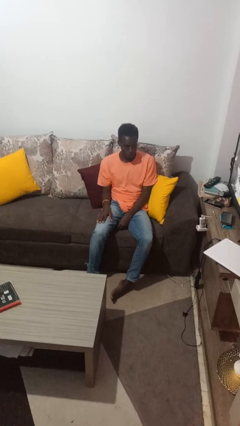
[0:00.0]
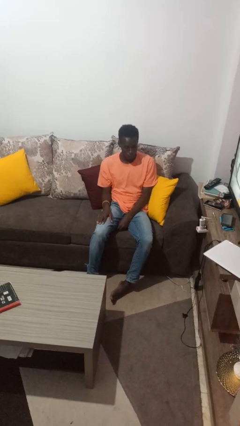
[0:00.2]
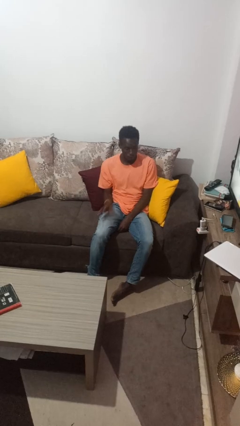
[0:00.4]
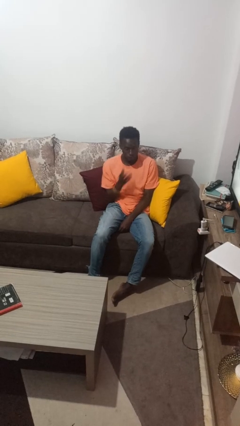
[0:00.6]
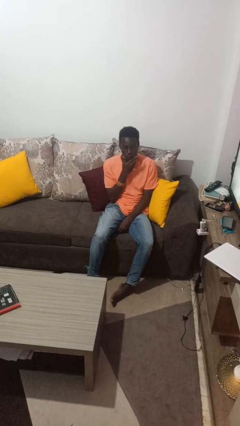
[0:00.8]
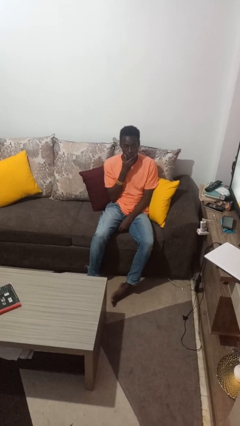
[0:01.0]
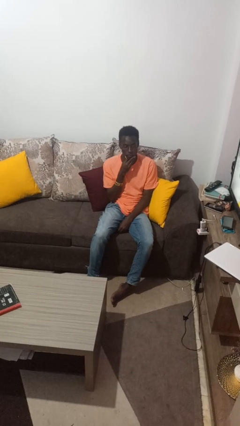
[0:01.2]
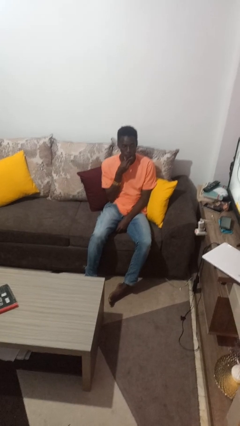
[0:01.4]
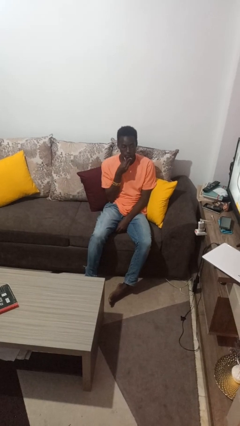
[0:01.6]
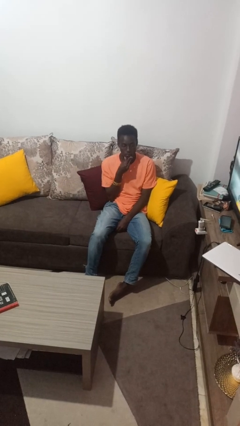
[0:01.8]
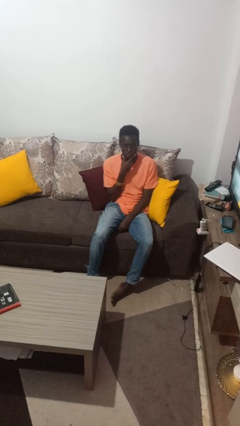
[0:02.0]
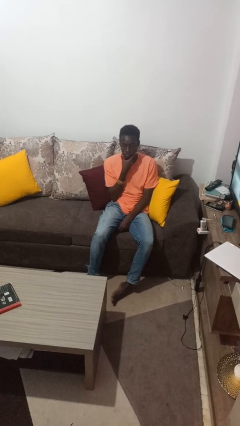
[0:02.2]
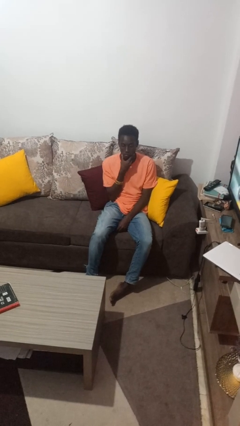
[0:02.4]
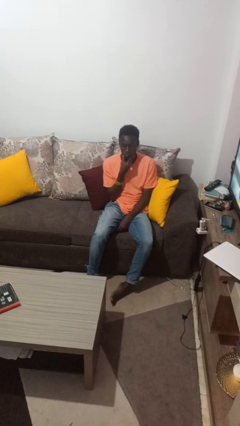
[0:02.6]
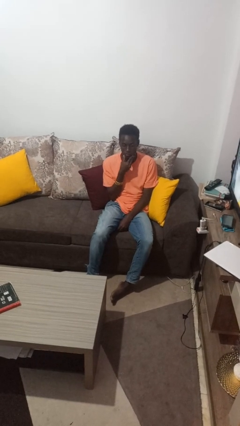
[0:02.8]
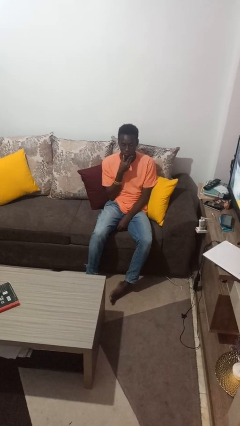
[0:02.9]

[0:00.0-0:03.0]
person strokes chin

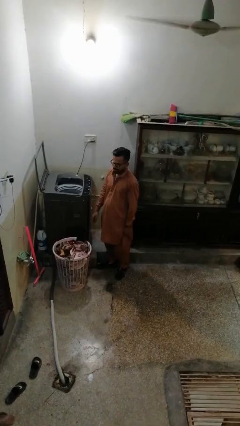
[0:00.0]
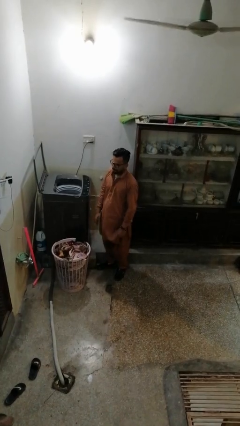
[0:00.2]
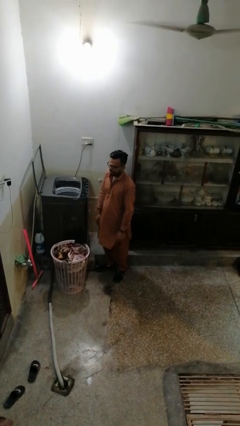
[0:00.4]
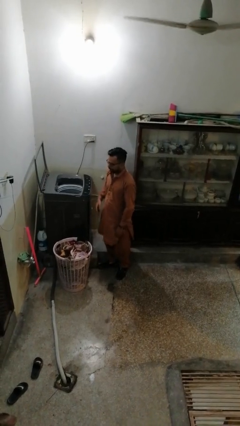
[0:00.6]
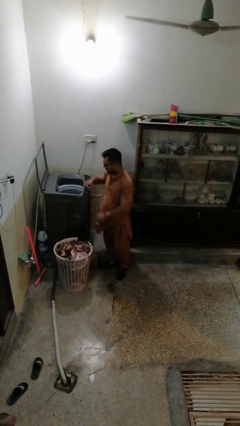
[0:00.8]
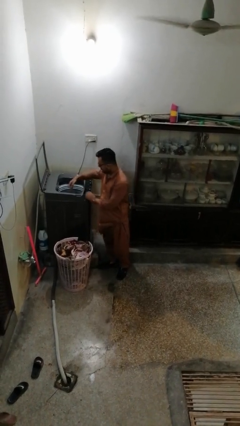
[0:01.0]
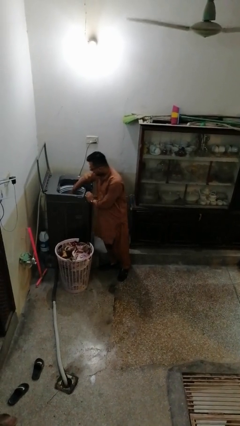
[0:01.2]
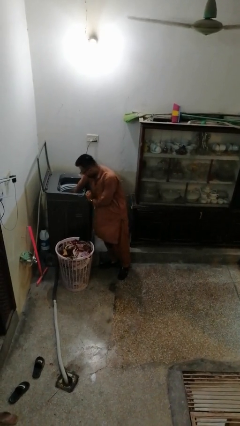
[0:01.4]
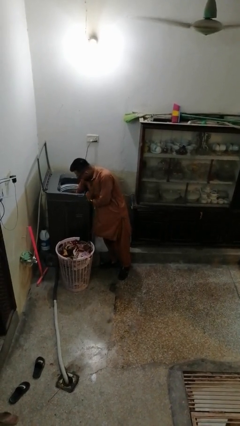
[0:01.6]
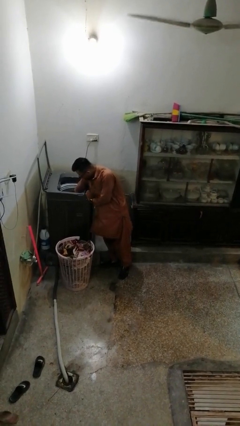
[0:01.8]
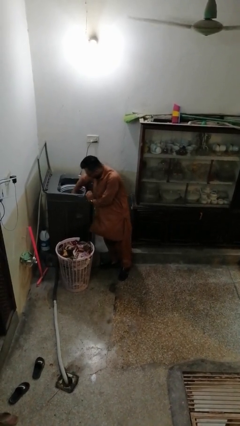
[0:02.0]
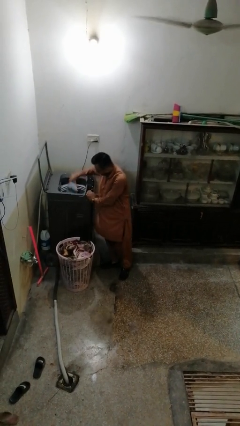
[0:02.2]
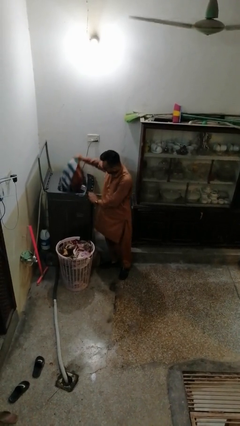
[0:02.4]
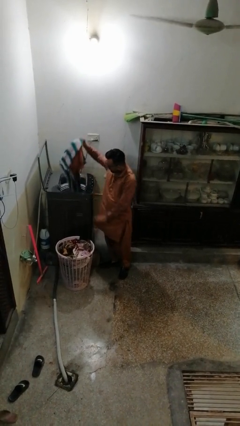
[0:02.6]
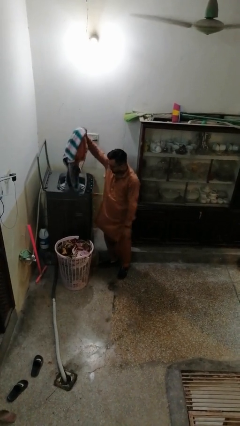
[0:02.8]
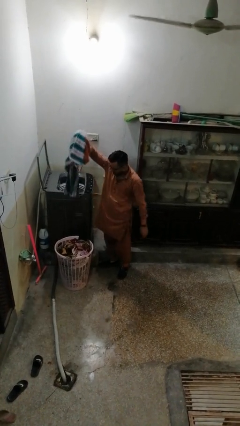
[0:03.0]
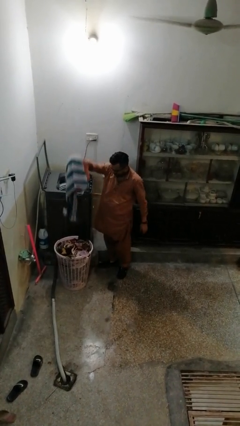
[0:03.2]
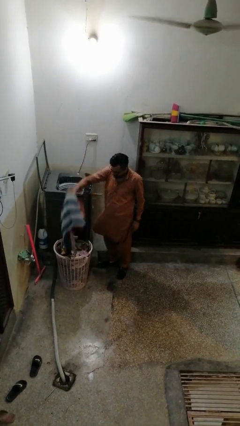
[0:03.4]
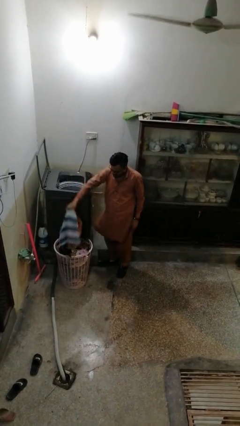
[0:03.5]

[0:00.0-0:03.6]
person unloads clotheswasher

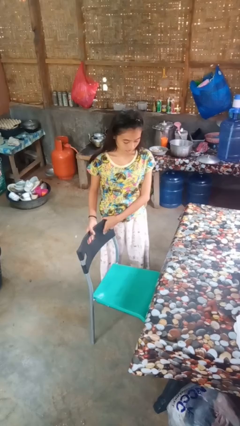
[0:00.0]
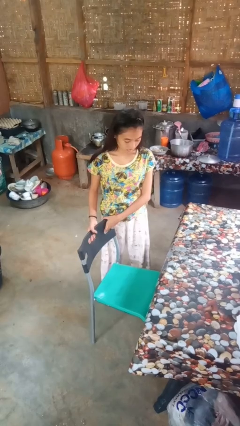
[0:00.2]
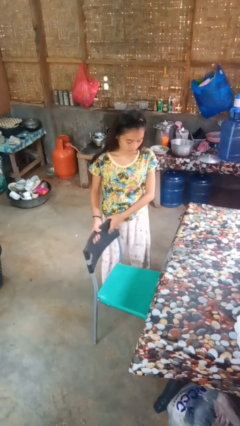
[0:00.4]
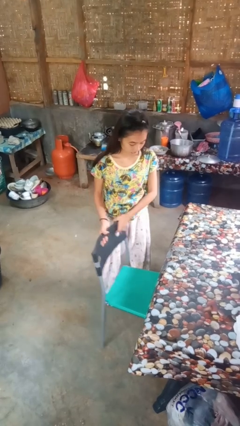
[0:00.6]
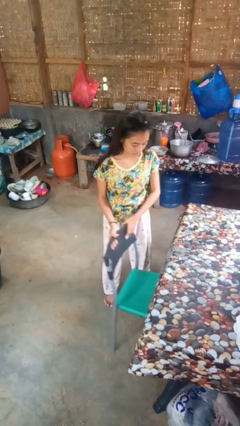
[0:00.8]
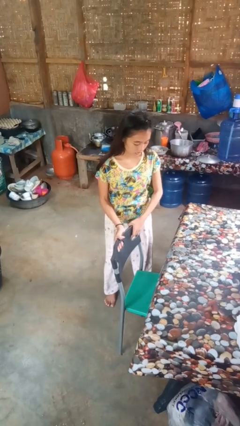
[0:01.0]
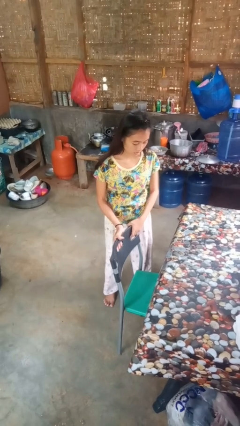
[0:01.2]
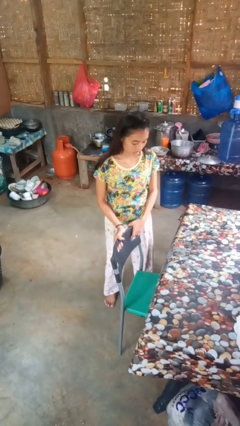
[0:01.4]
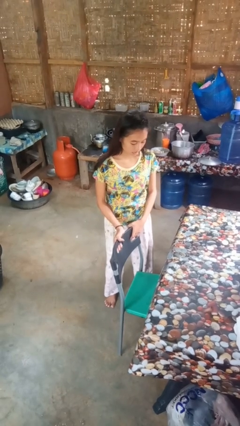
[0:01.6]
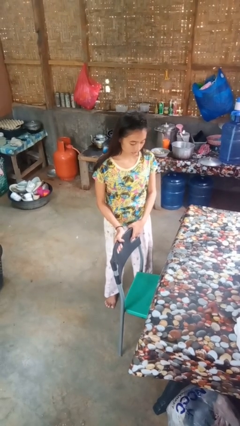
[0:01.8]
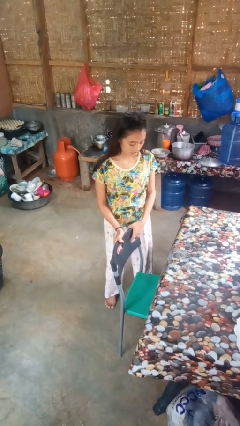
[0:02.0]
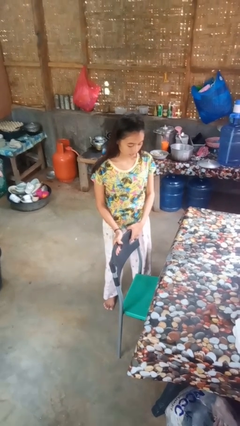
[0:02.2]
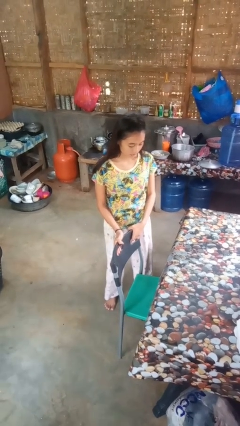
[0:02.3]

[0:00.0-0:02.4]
person pushes in chair

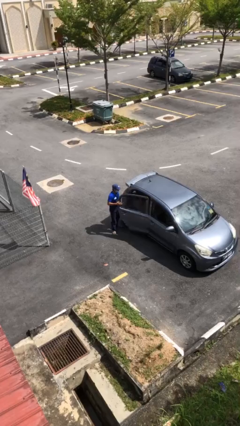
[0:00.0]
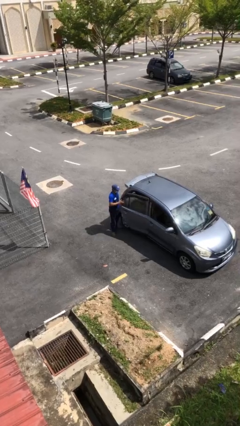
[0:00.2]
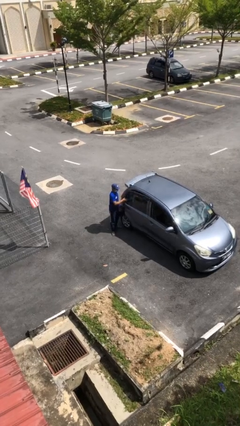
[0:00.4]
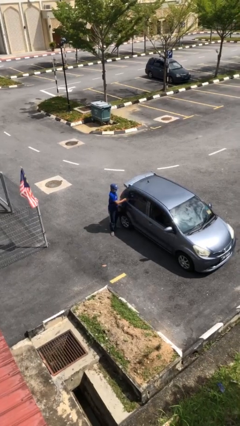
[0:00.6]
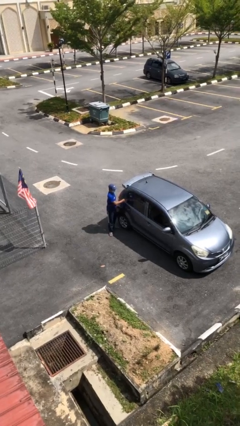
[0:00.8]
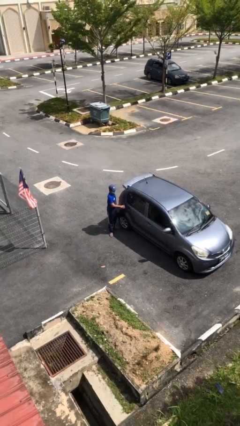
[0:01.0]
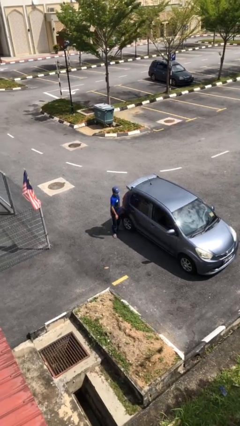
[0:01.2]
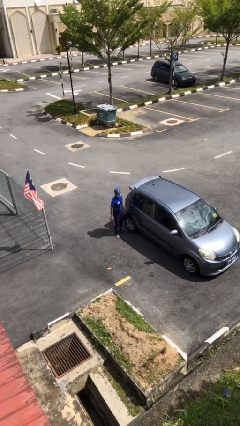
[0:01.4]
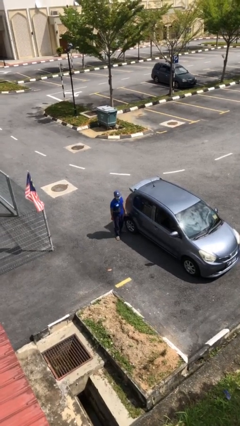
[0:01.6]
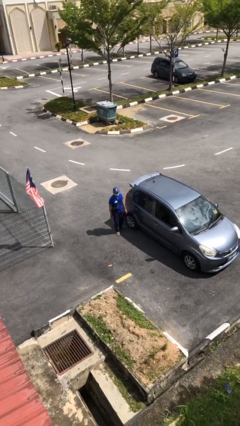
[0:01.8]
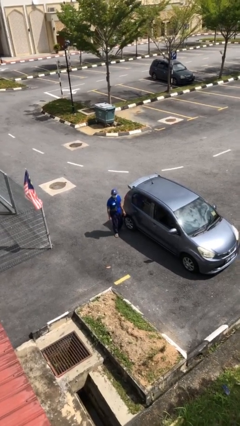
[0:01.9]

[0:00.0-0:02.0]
person closes car door

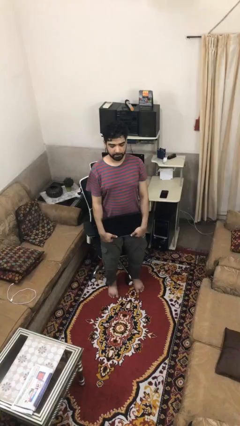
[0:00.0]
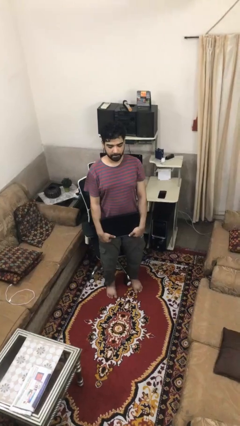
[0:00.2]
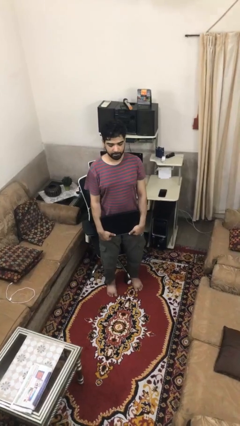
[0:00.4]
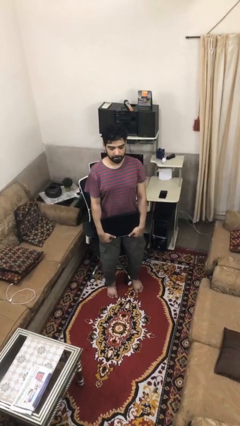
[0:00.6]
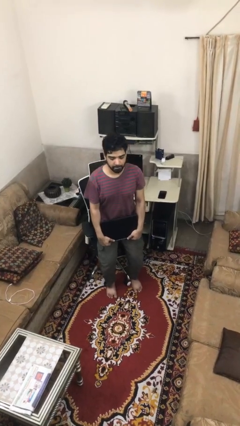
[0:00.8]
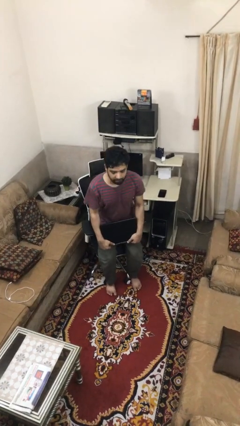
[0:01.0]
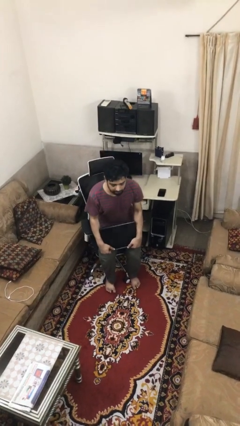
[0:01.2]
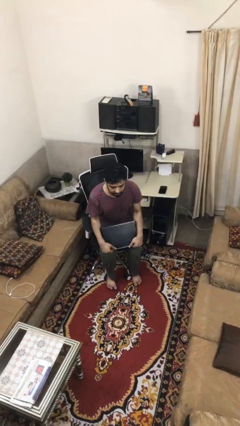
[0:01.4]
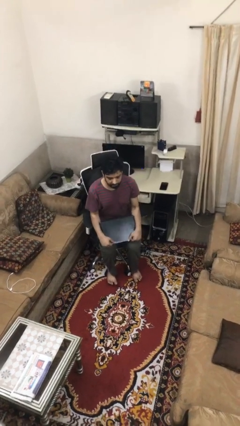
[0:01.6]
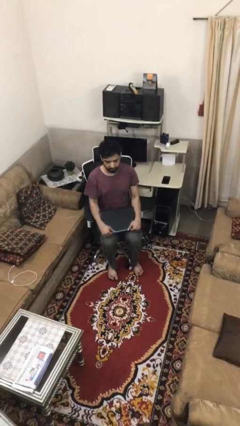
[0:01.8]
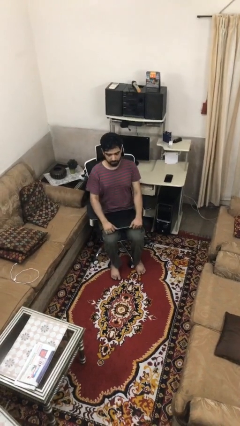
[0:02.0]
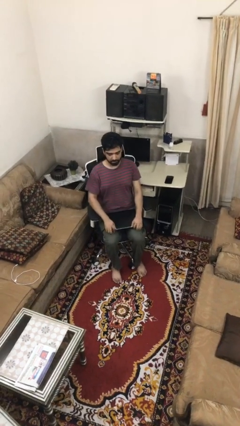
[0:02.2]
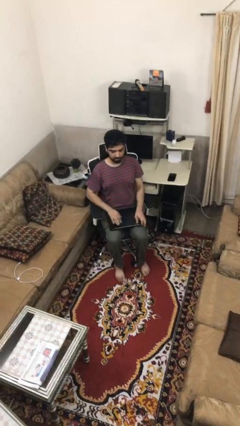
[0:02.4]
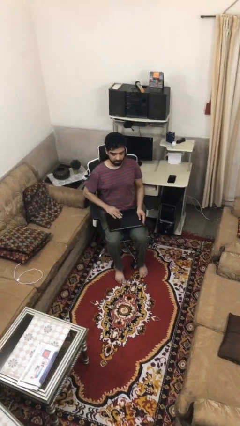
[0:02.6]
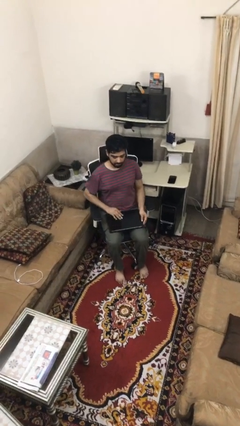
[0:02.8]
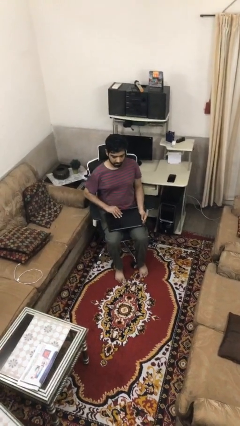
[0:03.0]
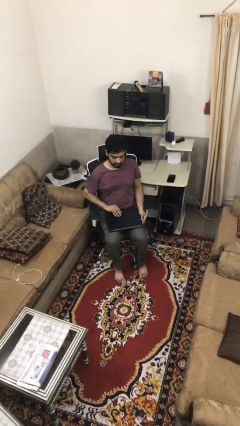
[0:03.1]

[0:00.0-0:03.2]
person sits down

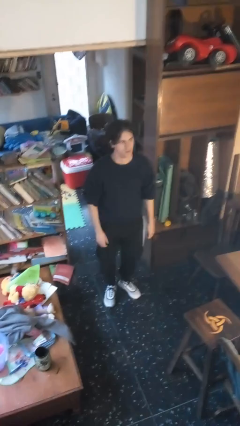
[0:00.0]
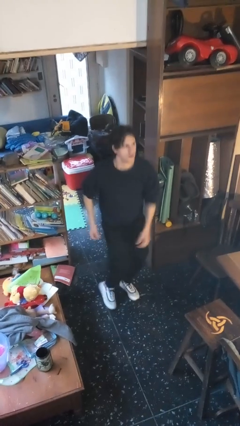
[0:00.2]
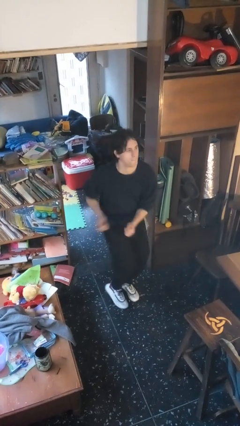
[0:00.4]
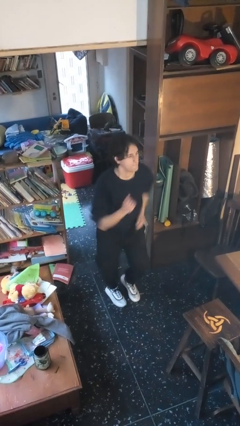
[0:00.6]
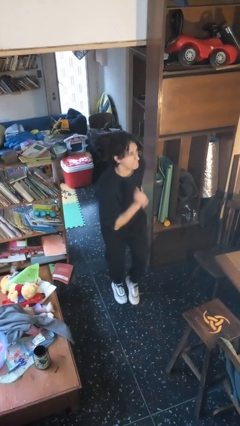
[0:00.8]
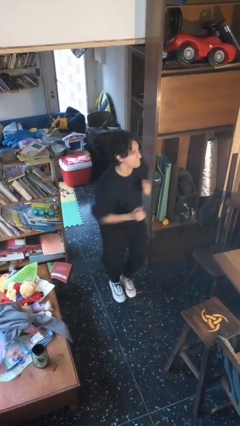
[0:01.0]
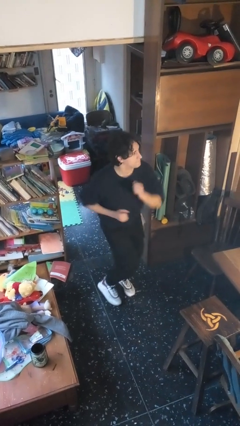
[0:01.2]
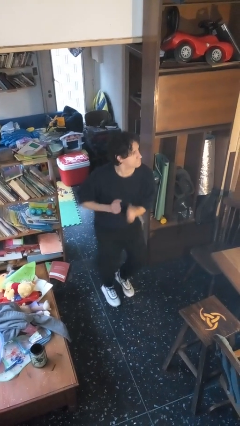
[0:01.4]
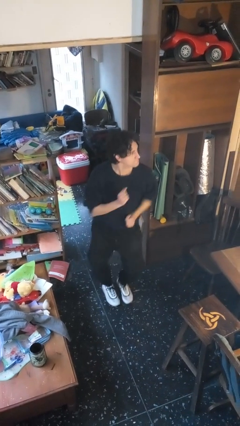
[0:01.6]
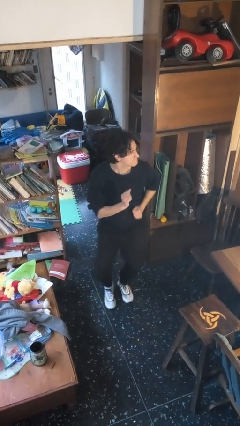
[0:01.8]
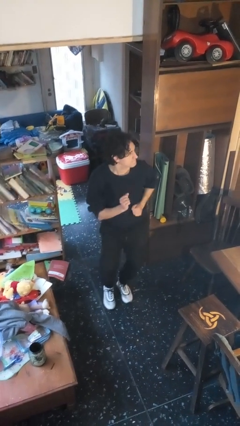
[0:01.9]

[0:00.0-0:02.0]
person dances in place

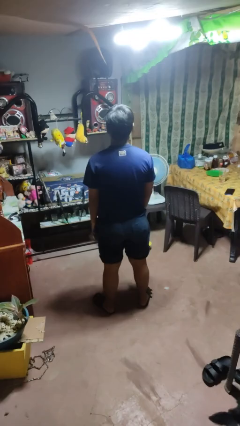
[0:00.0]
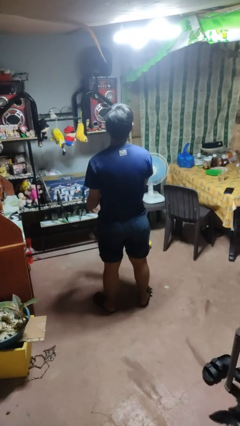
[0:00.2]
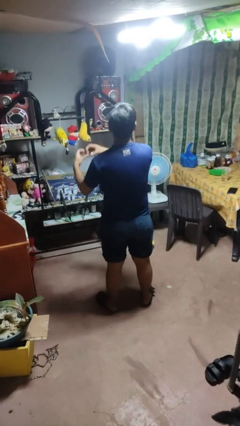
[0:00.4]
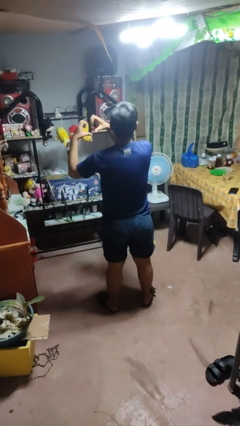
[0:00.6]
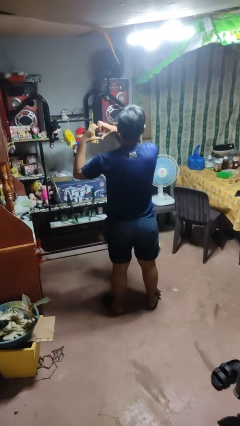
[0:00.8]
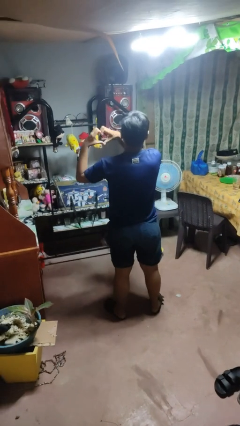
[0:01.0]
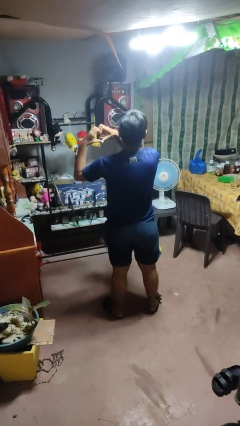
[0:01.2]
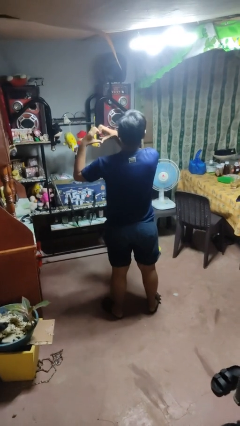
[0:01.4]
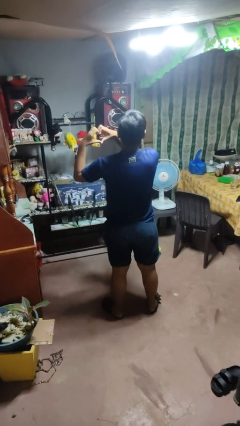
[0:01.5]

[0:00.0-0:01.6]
person gestures heart
